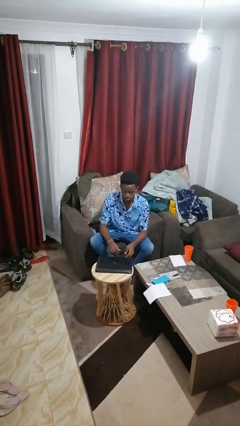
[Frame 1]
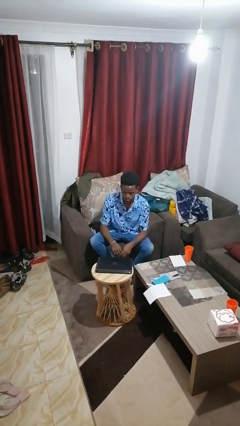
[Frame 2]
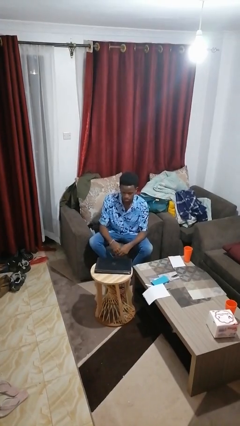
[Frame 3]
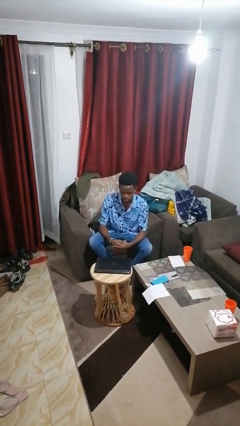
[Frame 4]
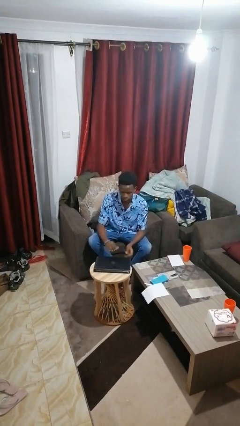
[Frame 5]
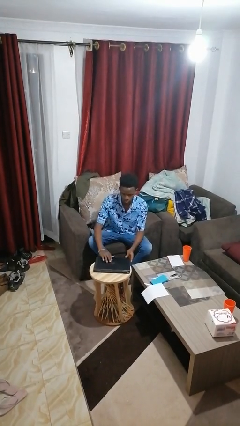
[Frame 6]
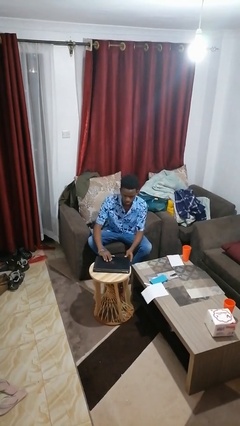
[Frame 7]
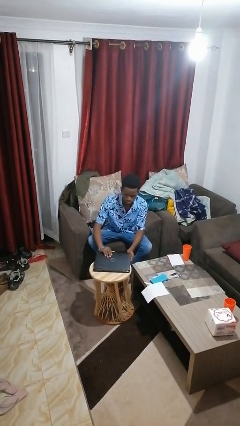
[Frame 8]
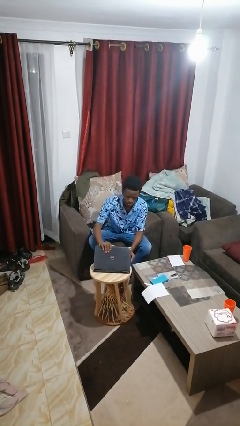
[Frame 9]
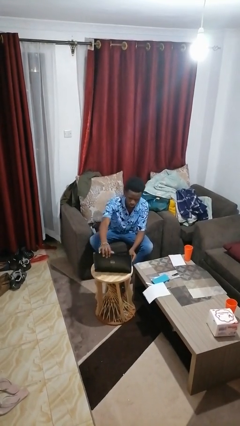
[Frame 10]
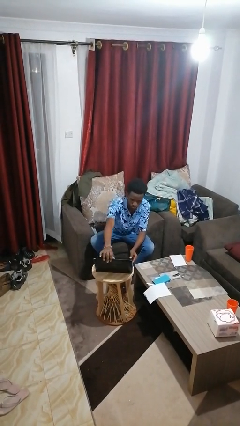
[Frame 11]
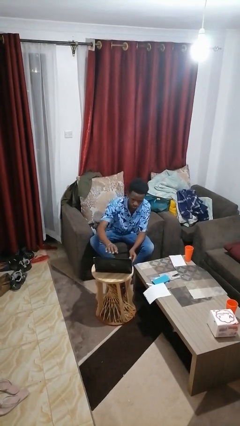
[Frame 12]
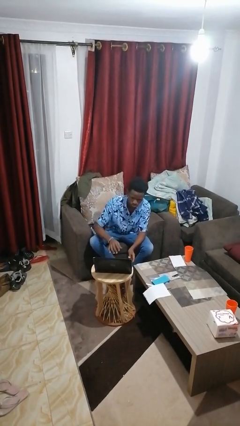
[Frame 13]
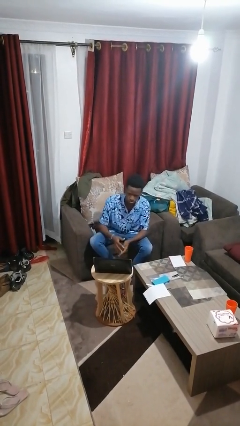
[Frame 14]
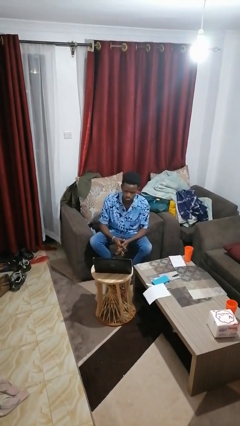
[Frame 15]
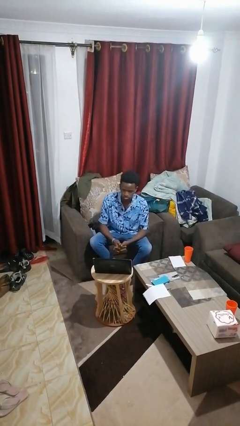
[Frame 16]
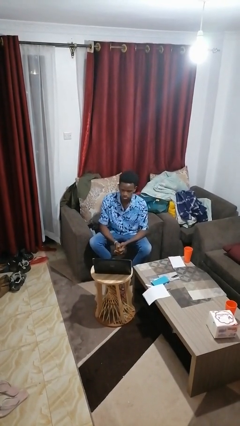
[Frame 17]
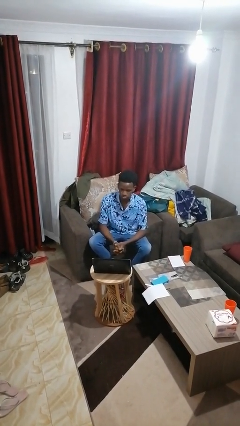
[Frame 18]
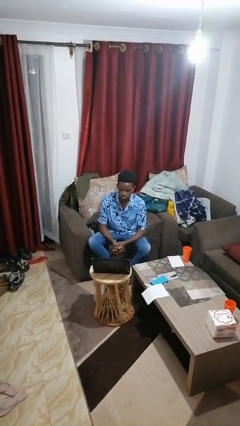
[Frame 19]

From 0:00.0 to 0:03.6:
person opens laptop

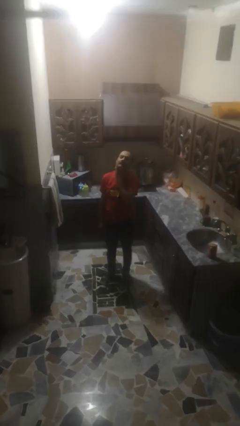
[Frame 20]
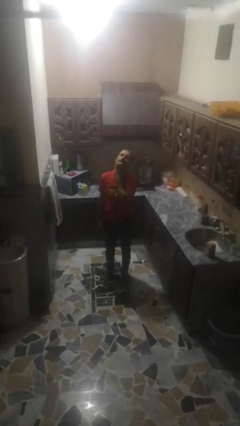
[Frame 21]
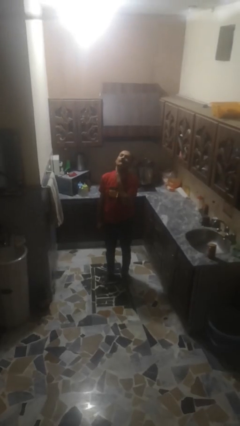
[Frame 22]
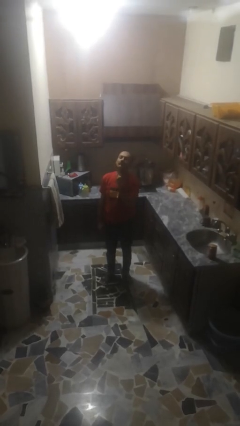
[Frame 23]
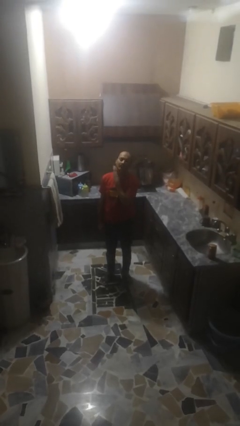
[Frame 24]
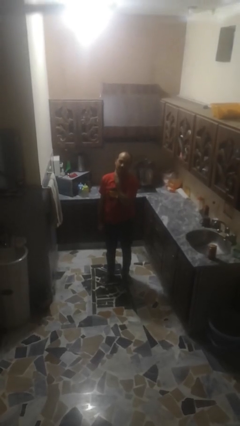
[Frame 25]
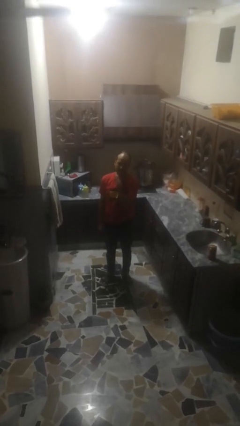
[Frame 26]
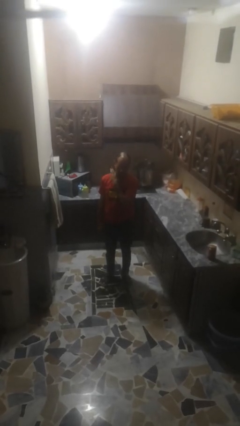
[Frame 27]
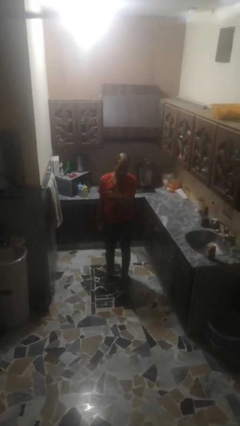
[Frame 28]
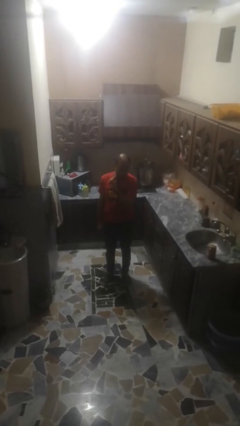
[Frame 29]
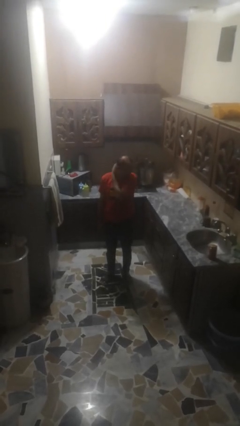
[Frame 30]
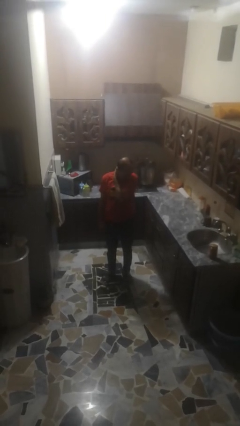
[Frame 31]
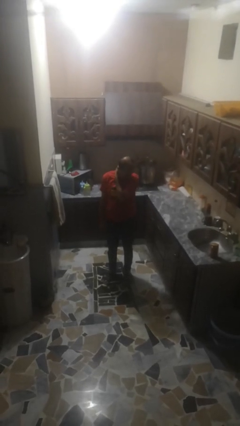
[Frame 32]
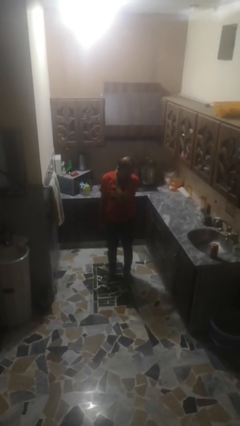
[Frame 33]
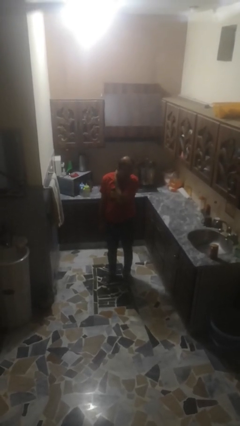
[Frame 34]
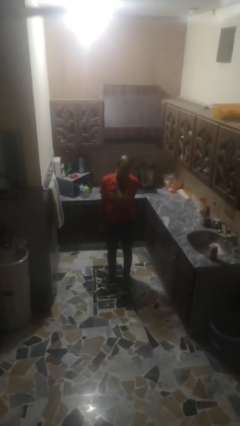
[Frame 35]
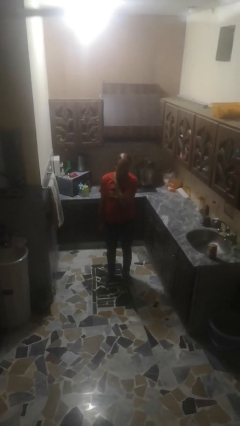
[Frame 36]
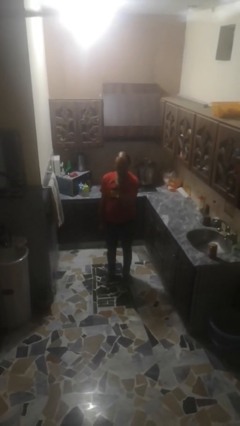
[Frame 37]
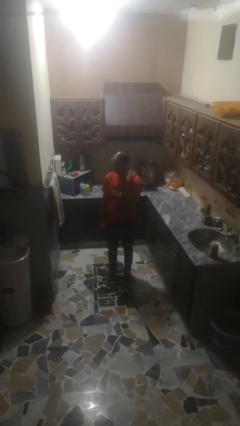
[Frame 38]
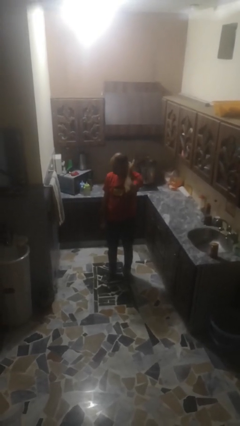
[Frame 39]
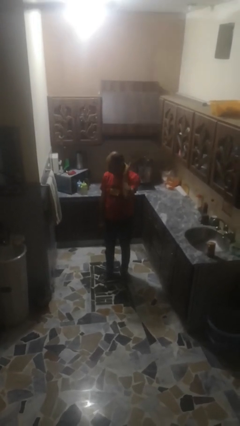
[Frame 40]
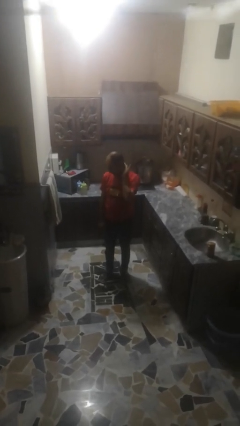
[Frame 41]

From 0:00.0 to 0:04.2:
person rubs neck

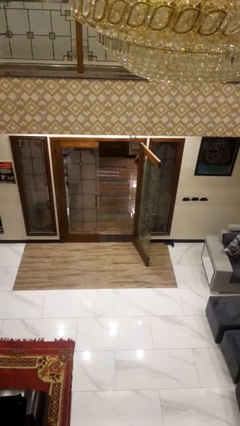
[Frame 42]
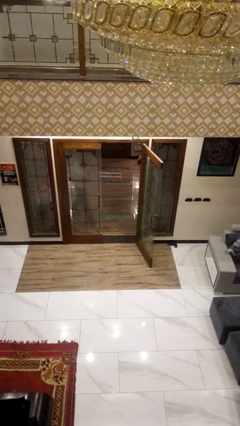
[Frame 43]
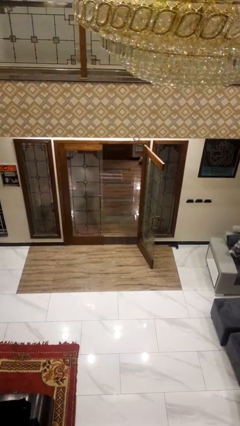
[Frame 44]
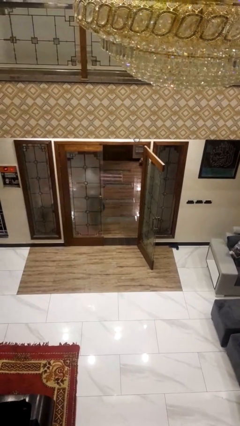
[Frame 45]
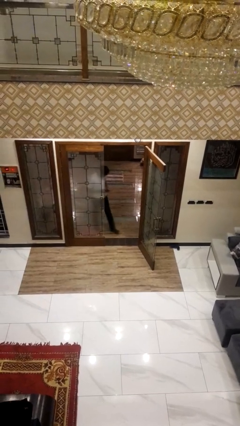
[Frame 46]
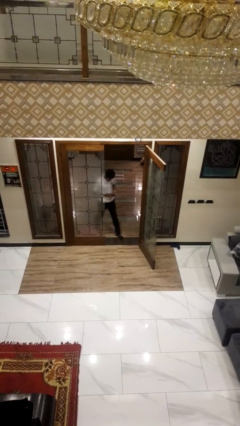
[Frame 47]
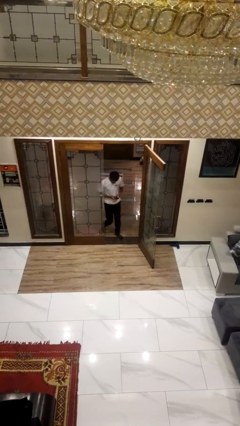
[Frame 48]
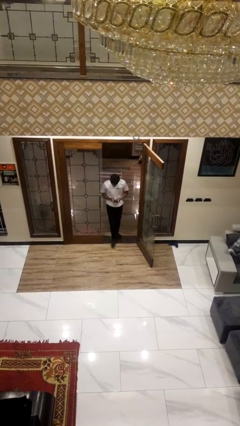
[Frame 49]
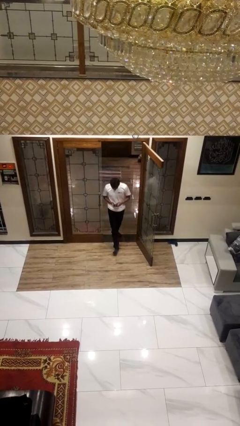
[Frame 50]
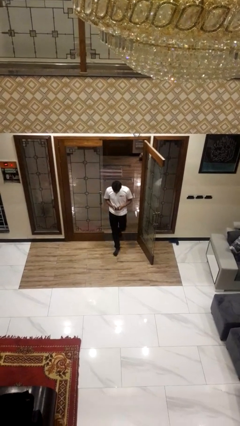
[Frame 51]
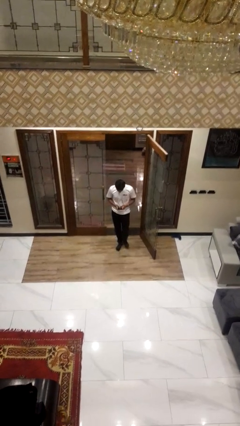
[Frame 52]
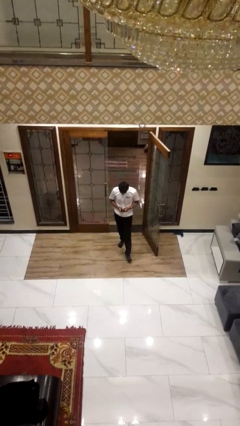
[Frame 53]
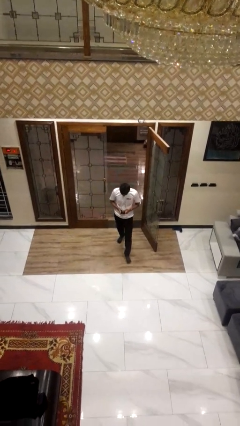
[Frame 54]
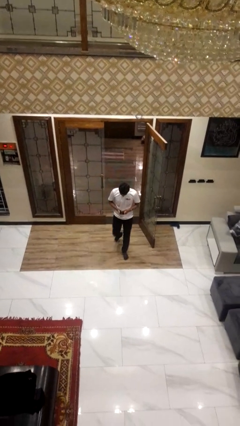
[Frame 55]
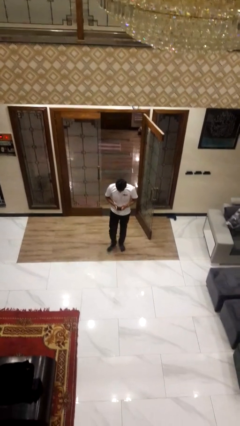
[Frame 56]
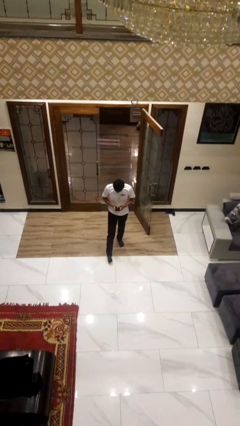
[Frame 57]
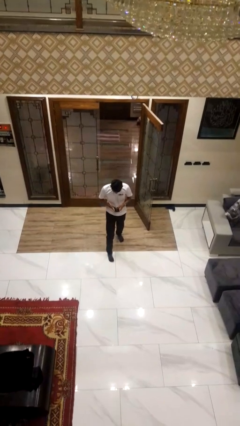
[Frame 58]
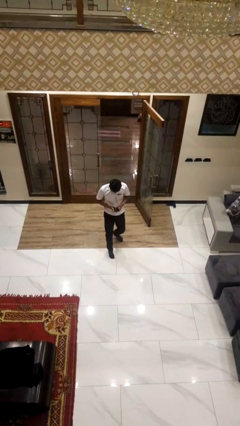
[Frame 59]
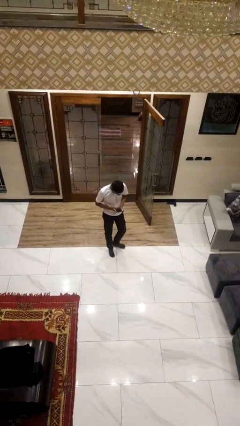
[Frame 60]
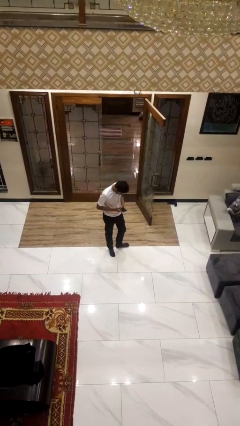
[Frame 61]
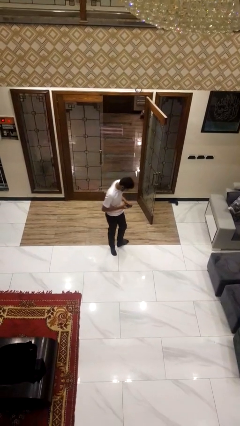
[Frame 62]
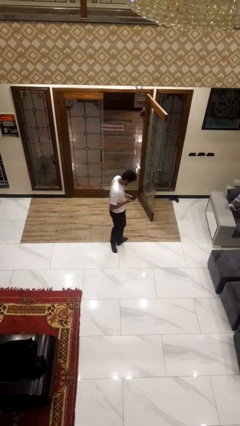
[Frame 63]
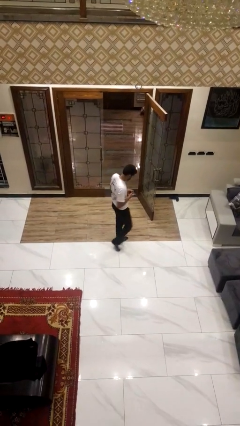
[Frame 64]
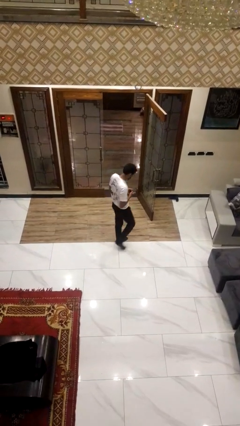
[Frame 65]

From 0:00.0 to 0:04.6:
person enters scene through structure

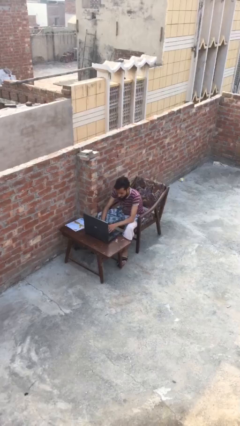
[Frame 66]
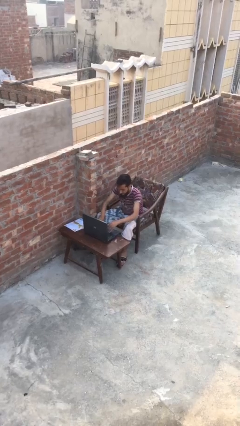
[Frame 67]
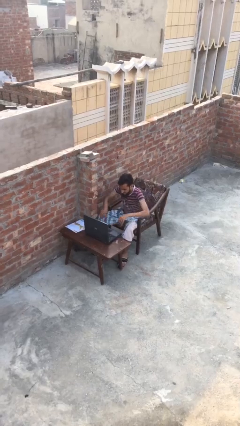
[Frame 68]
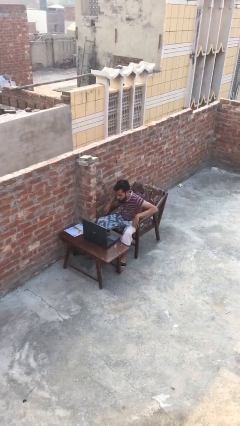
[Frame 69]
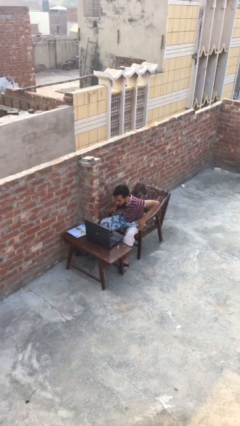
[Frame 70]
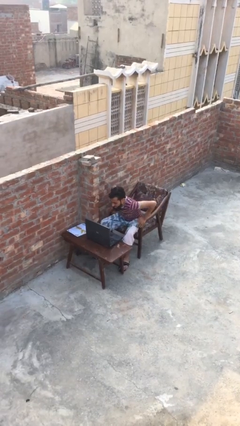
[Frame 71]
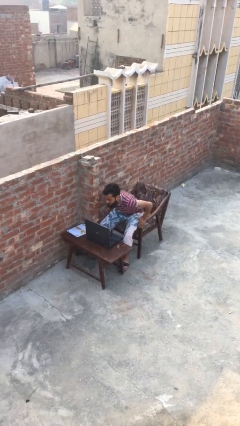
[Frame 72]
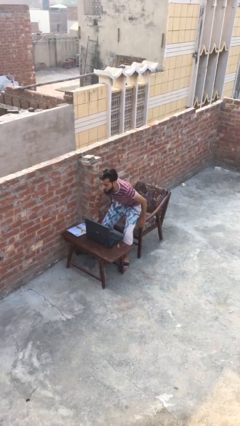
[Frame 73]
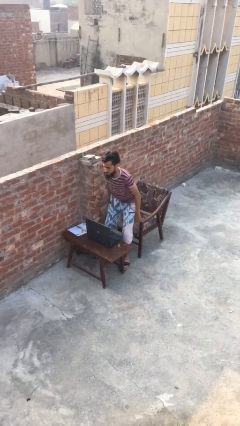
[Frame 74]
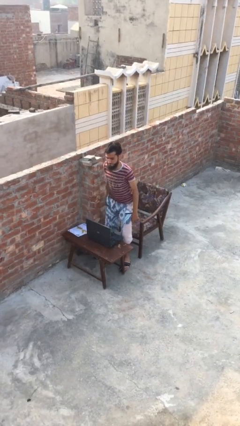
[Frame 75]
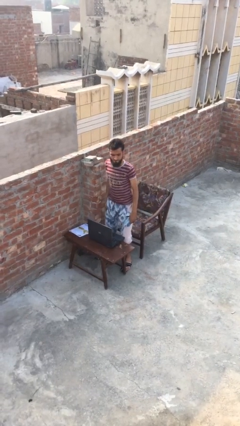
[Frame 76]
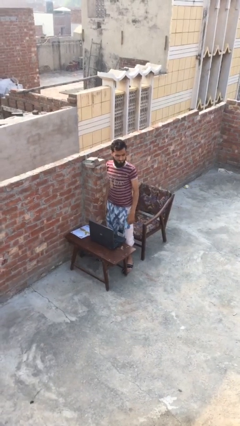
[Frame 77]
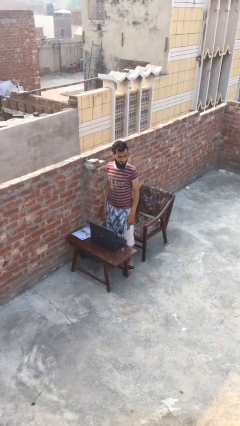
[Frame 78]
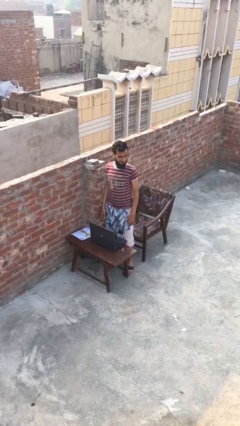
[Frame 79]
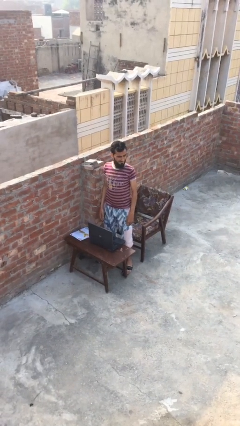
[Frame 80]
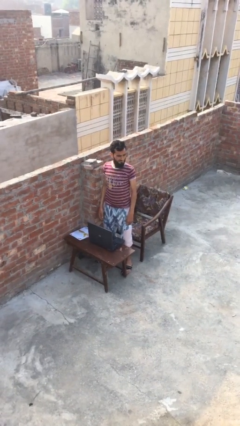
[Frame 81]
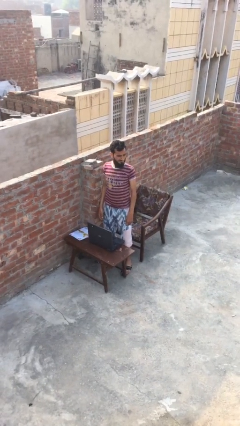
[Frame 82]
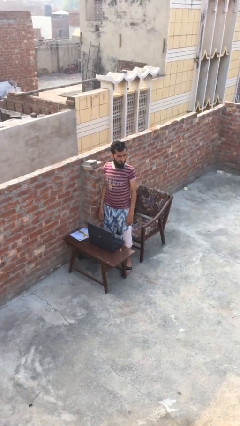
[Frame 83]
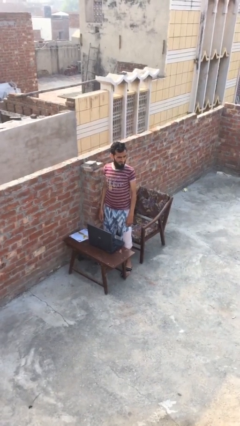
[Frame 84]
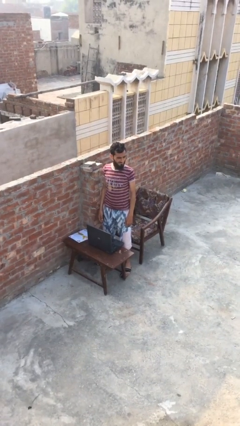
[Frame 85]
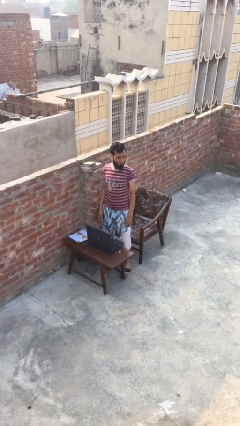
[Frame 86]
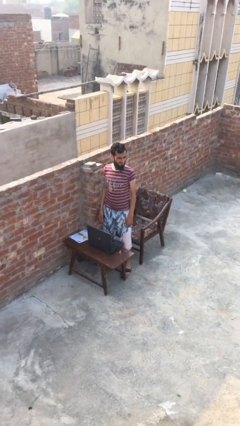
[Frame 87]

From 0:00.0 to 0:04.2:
person stands up

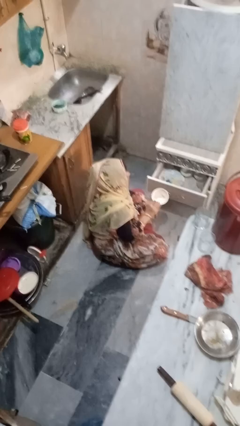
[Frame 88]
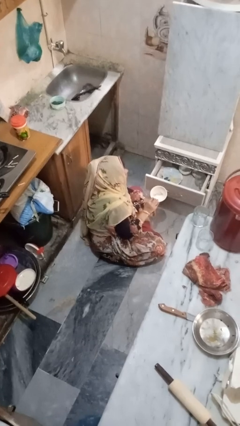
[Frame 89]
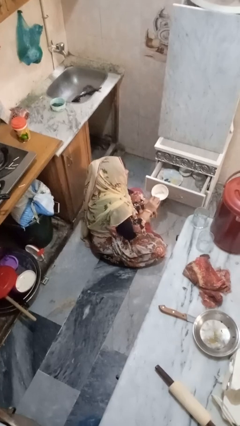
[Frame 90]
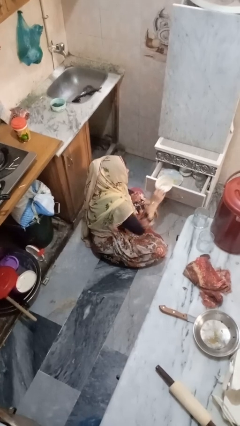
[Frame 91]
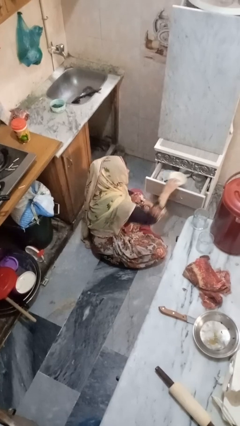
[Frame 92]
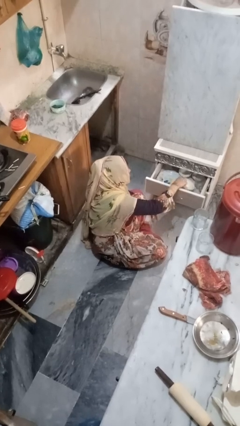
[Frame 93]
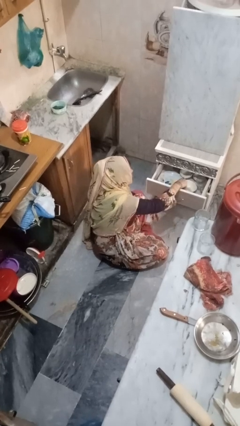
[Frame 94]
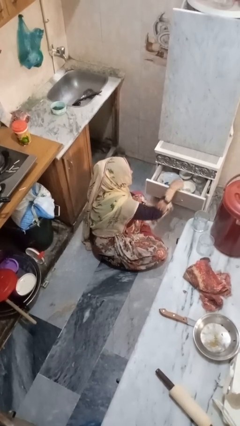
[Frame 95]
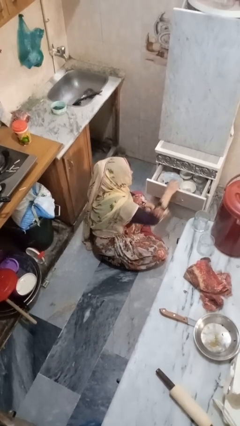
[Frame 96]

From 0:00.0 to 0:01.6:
person puts object into kitchen drawer
